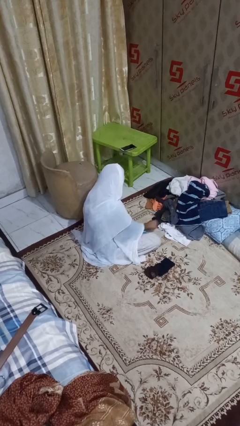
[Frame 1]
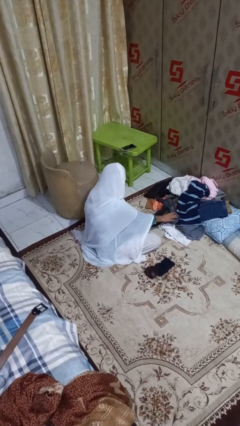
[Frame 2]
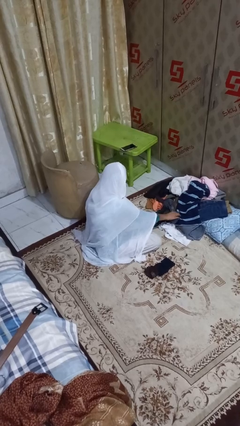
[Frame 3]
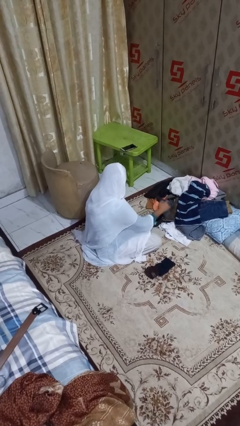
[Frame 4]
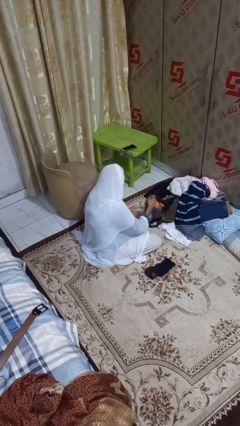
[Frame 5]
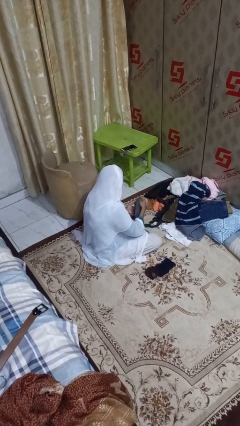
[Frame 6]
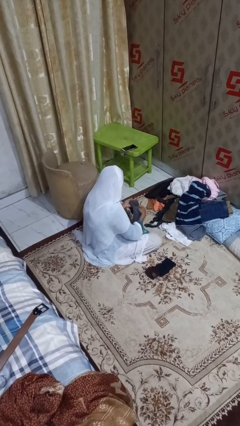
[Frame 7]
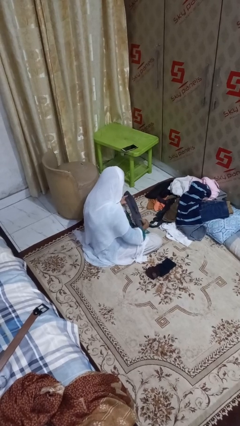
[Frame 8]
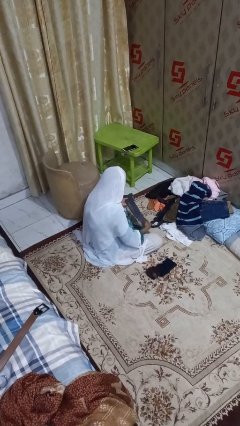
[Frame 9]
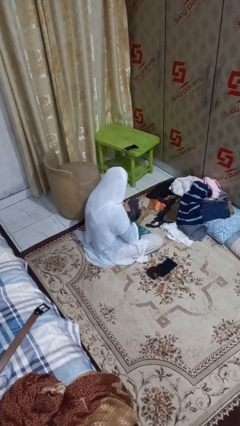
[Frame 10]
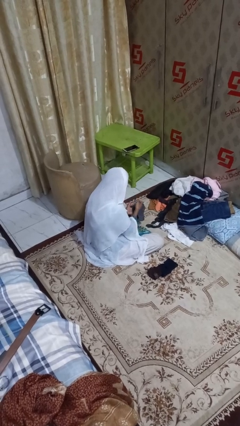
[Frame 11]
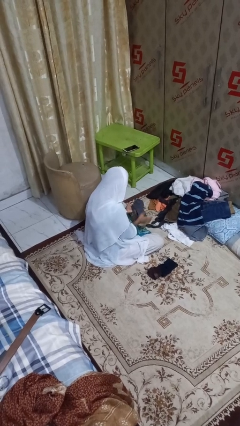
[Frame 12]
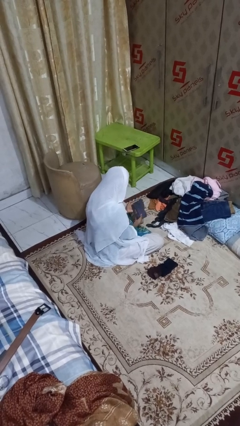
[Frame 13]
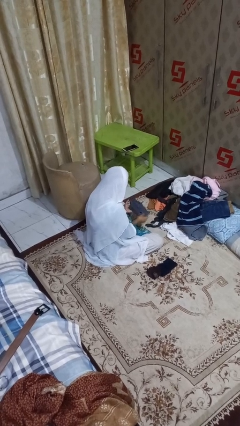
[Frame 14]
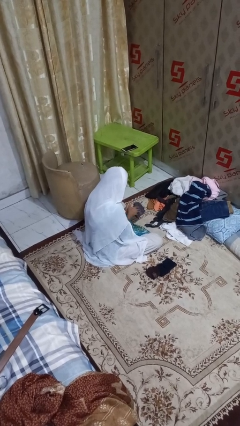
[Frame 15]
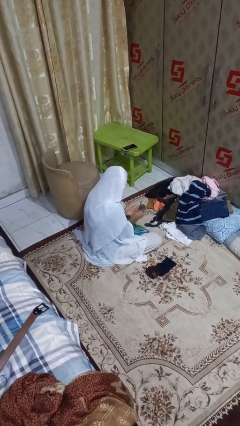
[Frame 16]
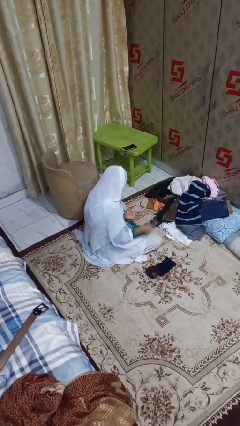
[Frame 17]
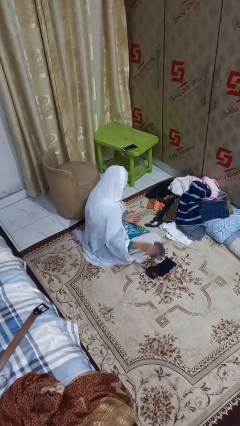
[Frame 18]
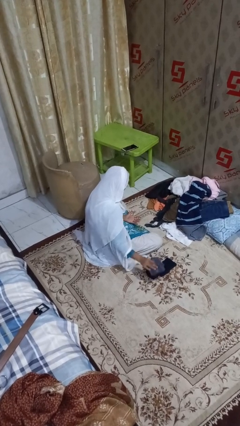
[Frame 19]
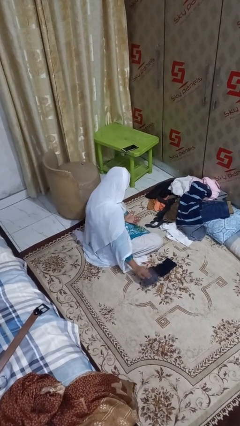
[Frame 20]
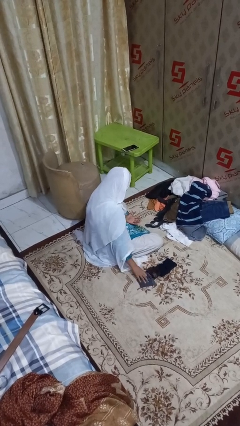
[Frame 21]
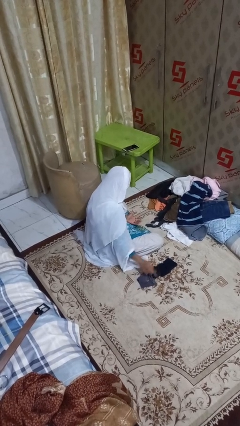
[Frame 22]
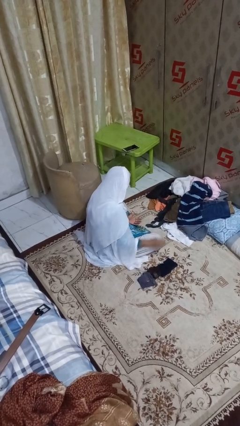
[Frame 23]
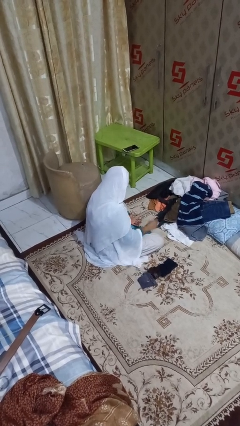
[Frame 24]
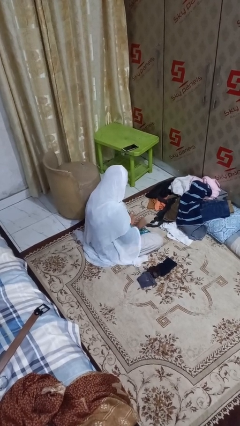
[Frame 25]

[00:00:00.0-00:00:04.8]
person folds socks

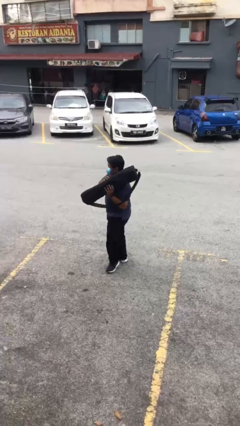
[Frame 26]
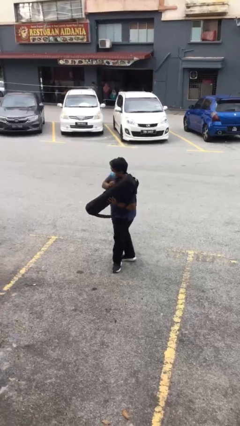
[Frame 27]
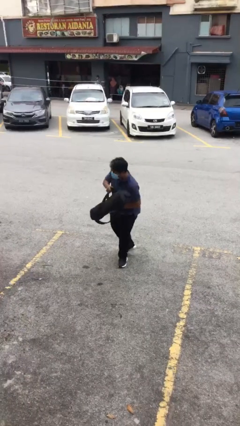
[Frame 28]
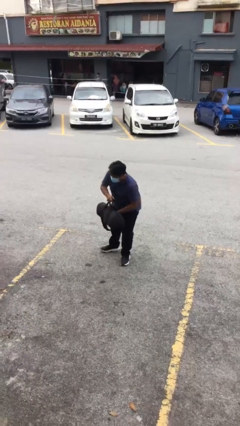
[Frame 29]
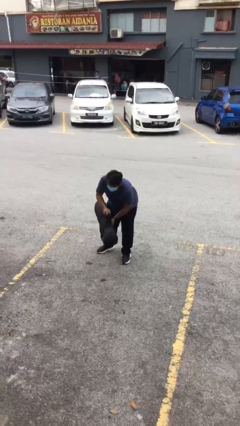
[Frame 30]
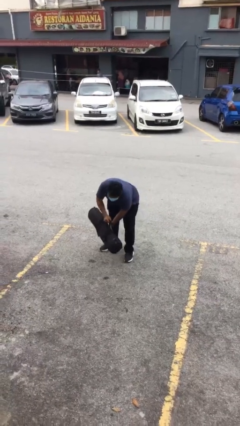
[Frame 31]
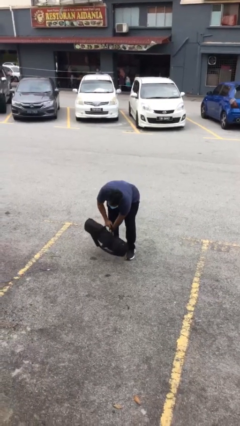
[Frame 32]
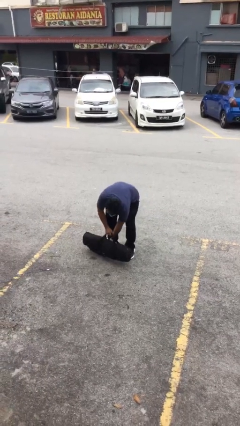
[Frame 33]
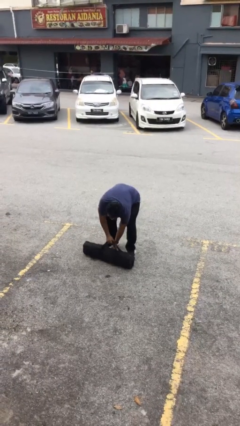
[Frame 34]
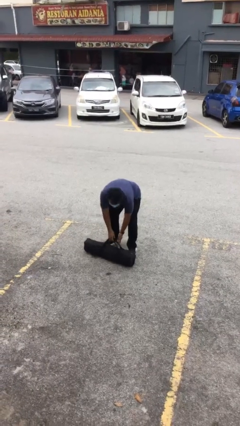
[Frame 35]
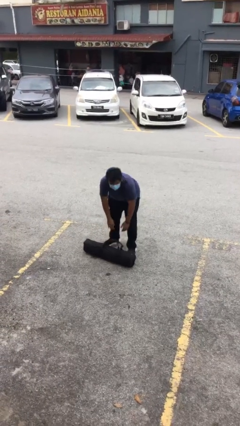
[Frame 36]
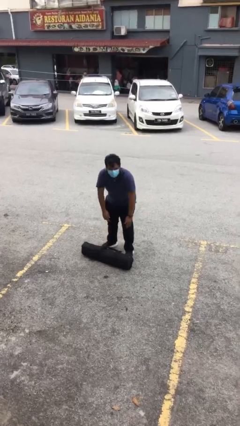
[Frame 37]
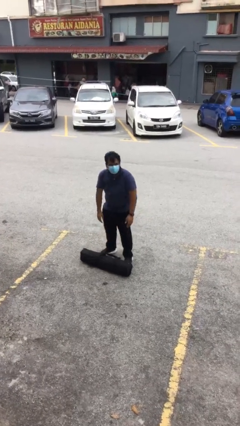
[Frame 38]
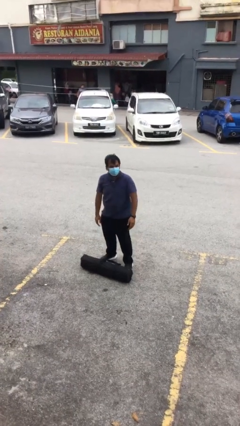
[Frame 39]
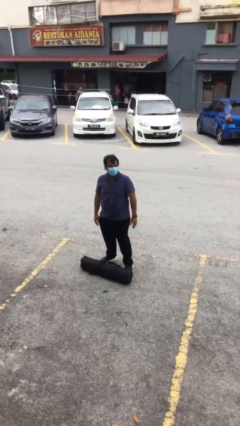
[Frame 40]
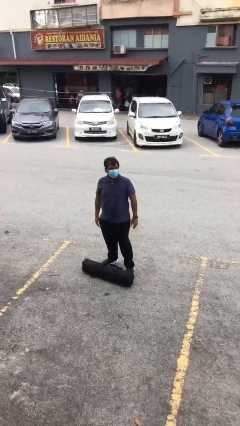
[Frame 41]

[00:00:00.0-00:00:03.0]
person puts down object on floor

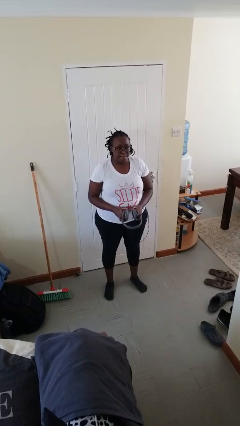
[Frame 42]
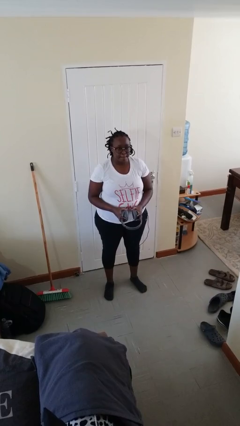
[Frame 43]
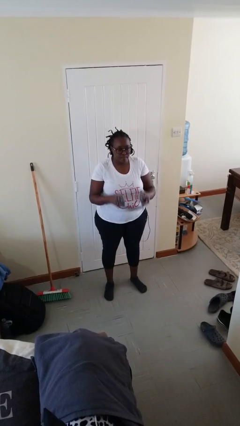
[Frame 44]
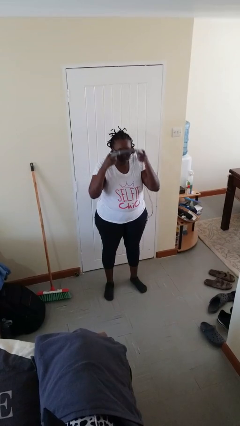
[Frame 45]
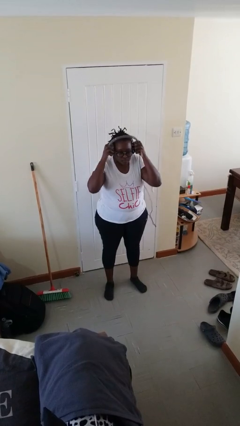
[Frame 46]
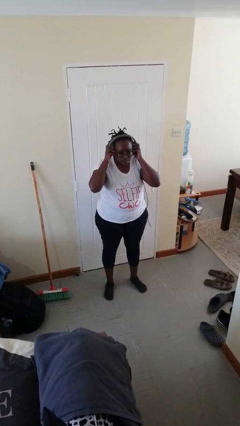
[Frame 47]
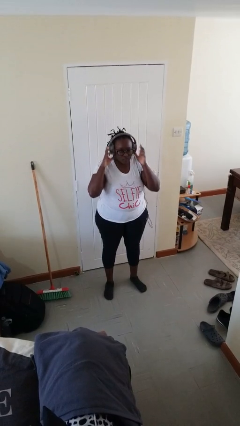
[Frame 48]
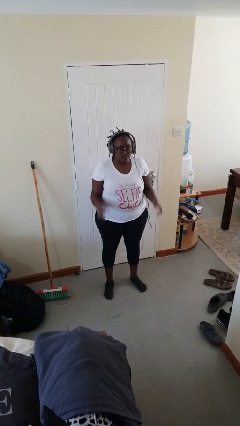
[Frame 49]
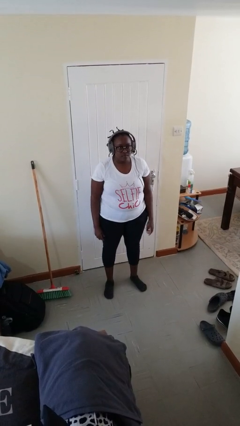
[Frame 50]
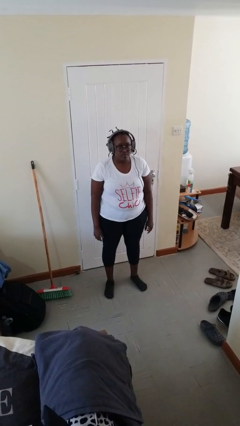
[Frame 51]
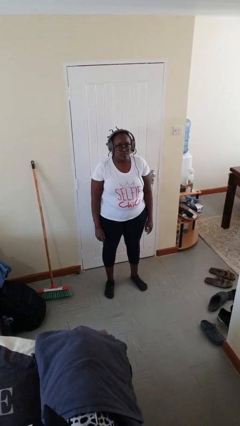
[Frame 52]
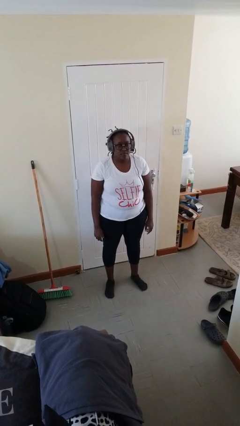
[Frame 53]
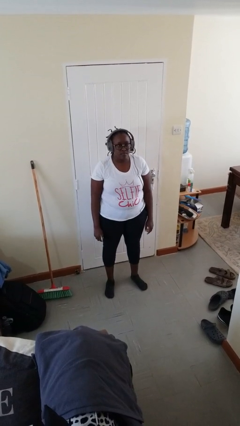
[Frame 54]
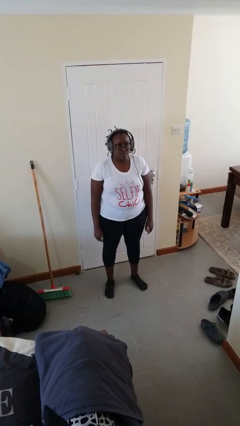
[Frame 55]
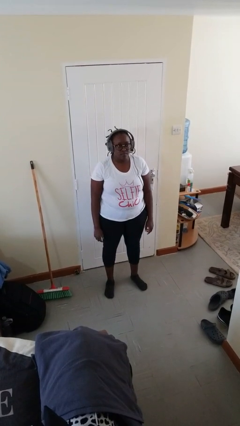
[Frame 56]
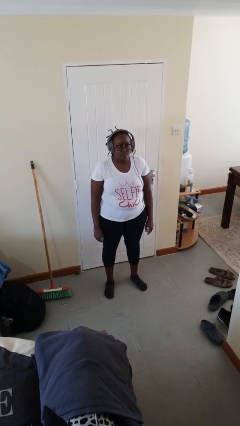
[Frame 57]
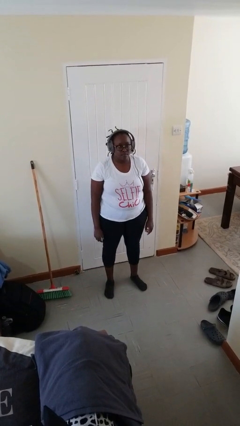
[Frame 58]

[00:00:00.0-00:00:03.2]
person puts on headphones

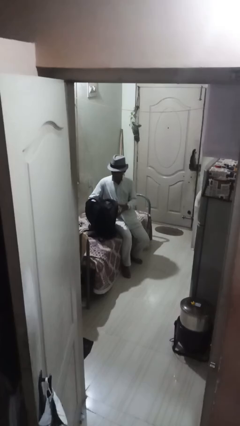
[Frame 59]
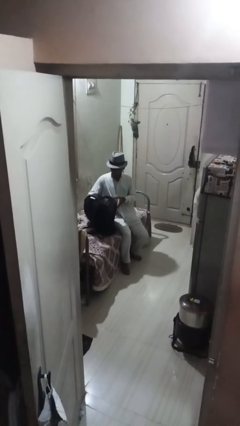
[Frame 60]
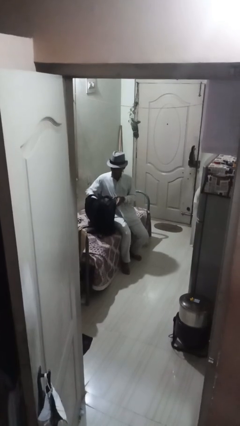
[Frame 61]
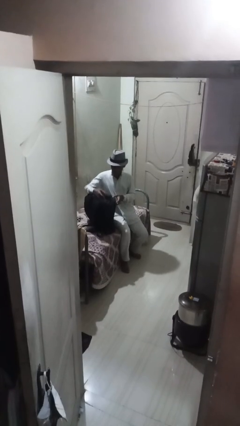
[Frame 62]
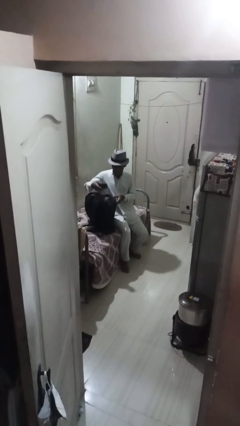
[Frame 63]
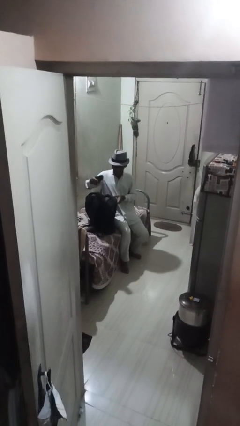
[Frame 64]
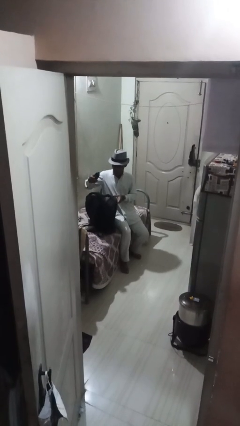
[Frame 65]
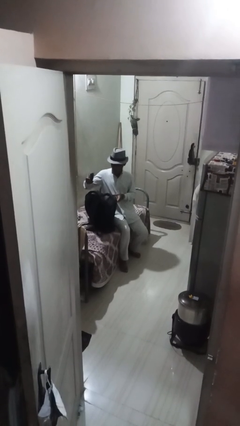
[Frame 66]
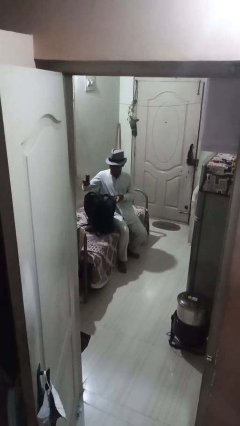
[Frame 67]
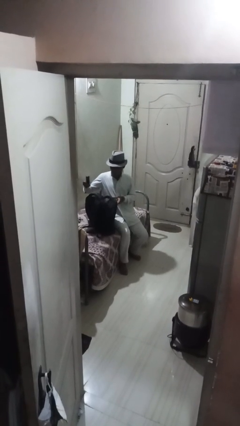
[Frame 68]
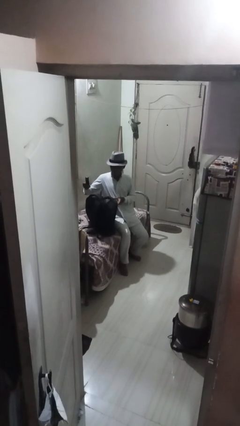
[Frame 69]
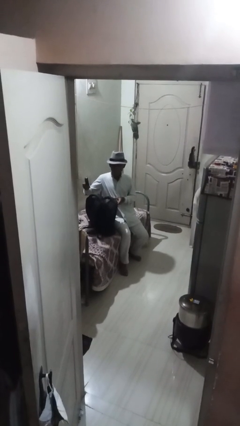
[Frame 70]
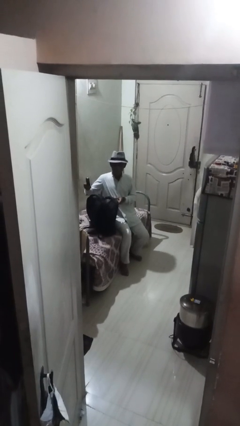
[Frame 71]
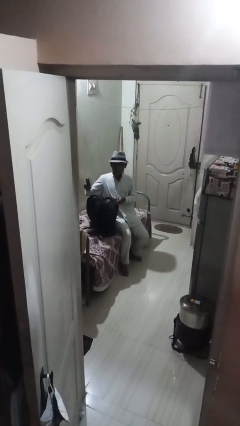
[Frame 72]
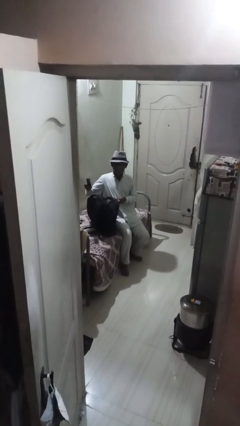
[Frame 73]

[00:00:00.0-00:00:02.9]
person takes object from backpack

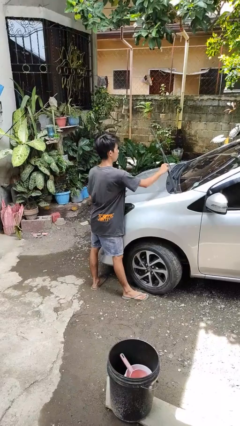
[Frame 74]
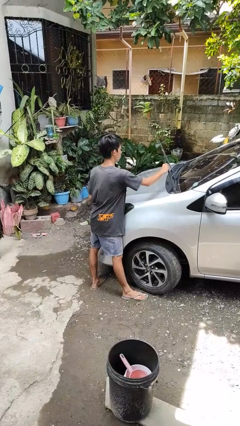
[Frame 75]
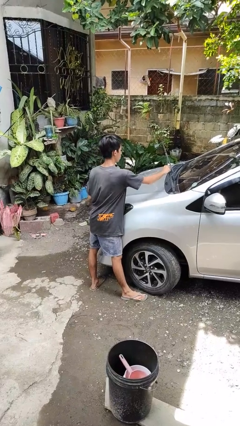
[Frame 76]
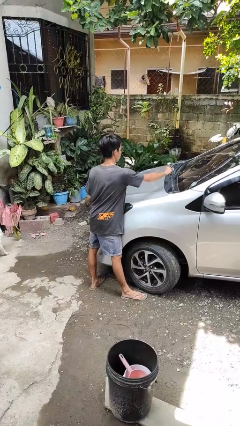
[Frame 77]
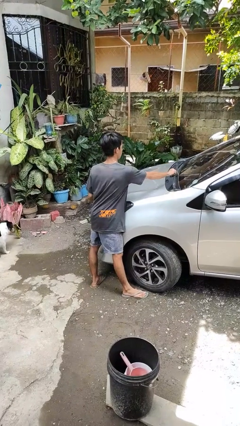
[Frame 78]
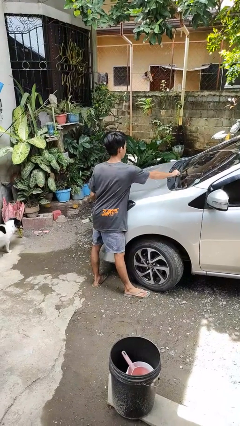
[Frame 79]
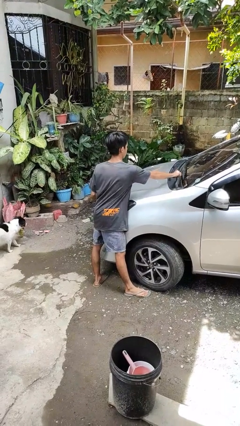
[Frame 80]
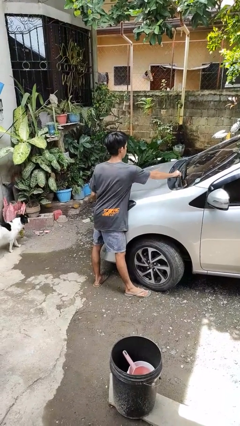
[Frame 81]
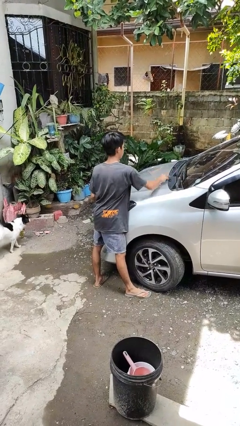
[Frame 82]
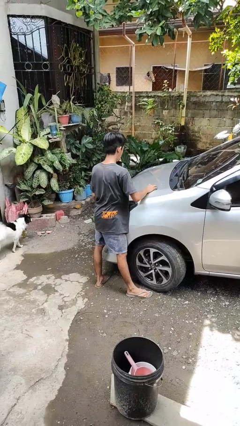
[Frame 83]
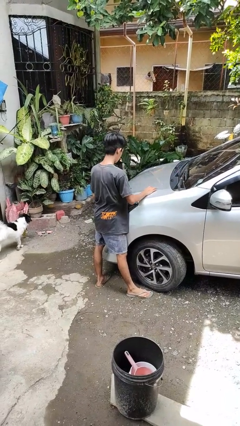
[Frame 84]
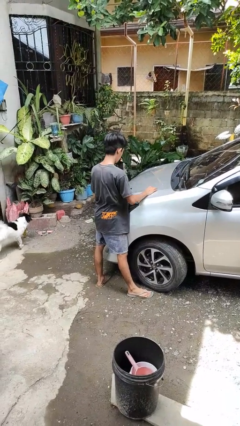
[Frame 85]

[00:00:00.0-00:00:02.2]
person flips down car wipers

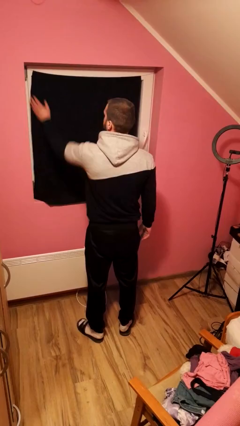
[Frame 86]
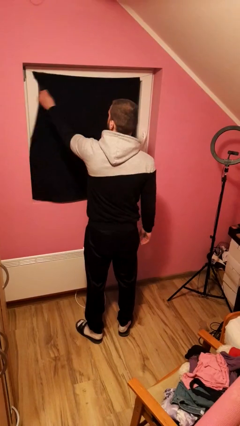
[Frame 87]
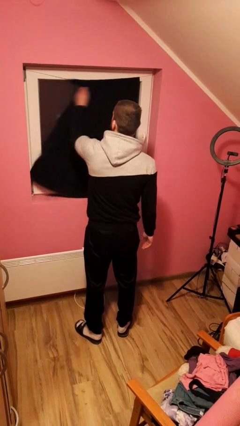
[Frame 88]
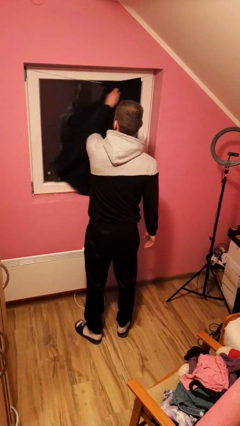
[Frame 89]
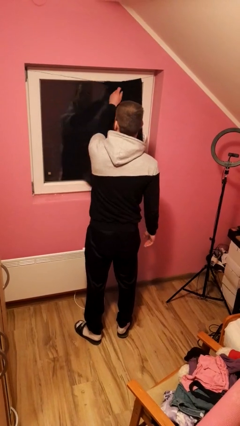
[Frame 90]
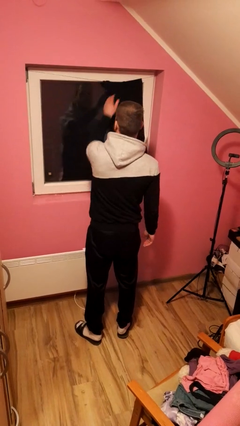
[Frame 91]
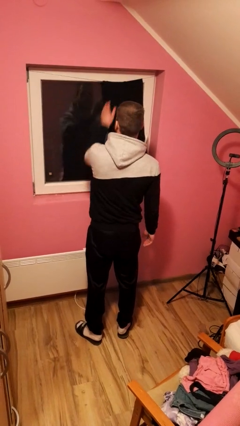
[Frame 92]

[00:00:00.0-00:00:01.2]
person opens curtains
